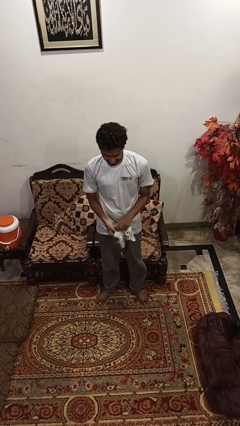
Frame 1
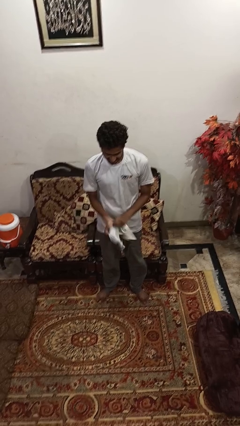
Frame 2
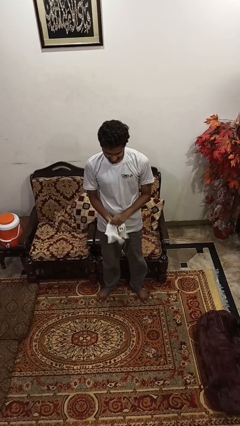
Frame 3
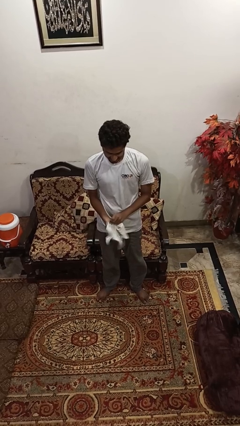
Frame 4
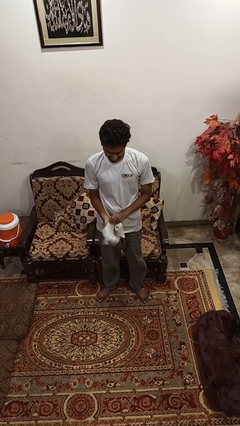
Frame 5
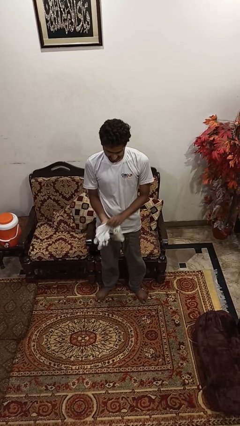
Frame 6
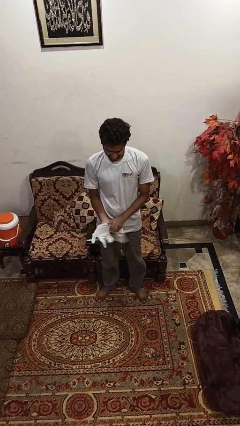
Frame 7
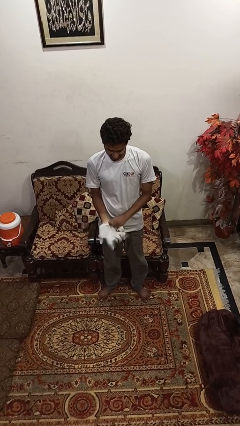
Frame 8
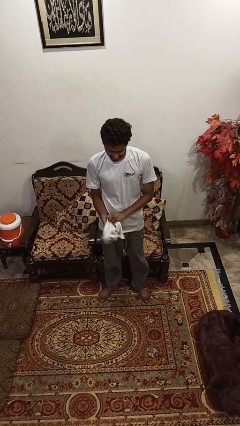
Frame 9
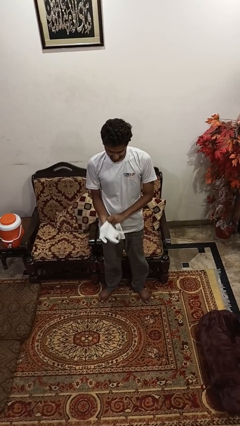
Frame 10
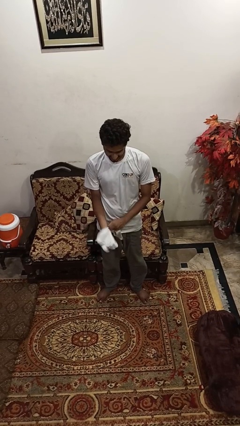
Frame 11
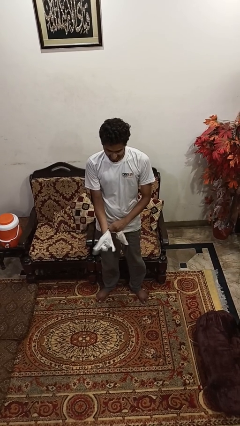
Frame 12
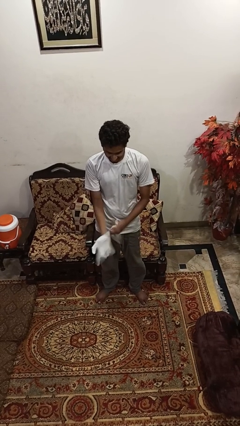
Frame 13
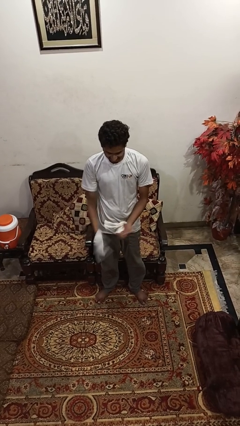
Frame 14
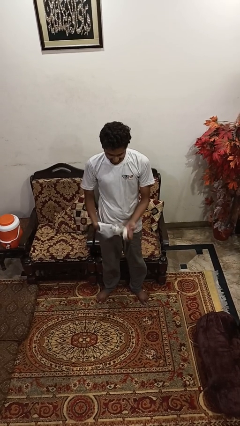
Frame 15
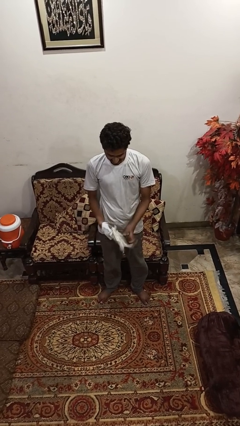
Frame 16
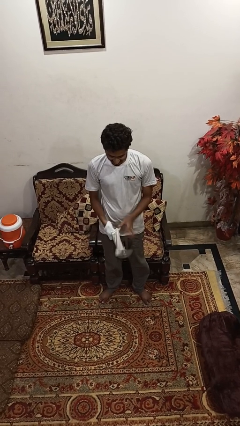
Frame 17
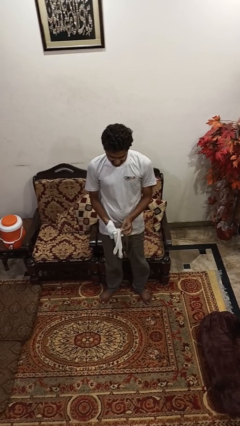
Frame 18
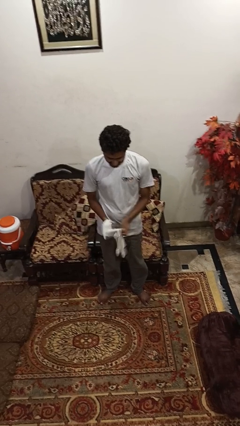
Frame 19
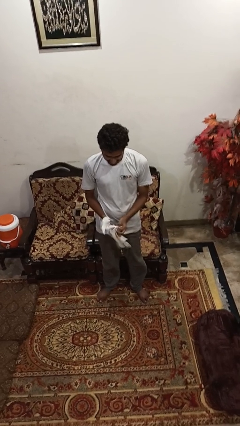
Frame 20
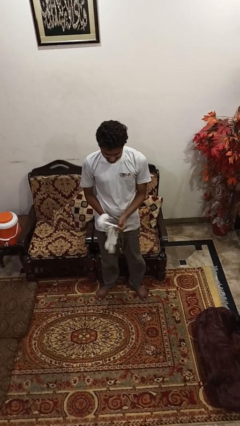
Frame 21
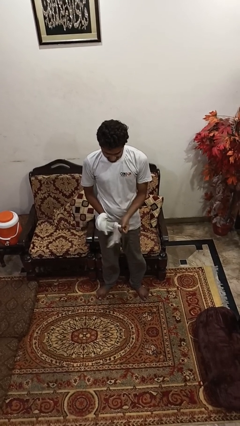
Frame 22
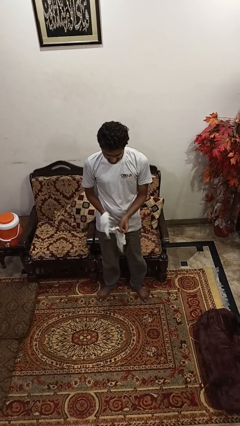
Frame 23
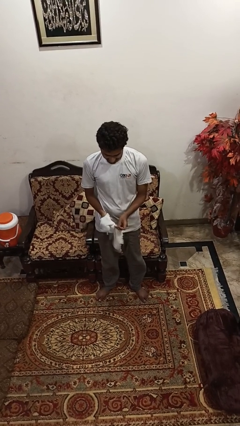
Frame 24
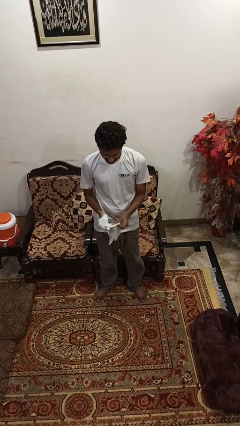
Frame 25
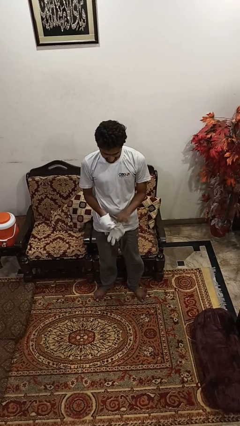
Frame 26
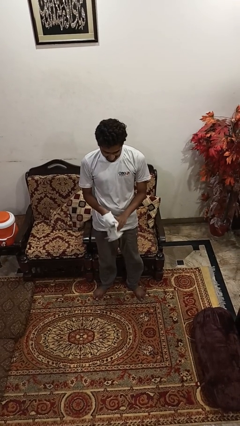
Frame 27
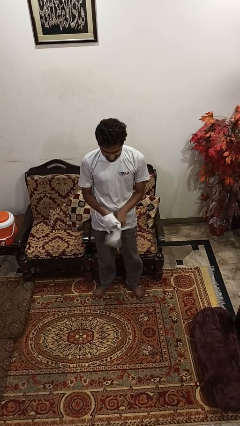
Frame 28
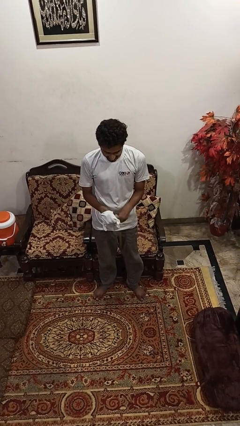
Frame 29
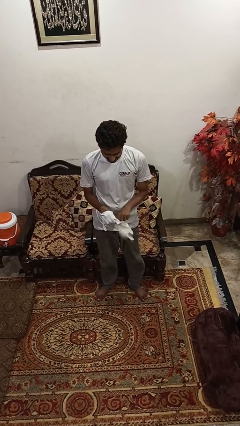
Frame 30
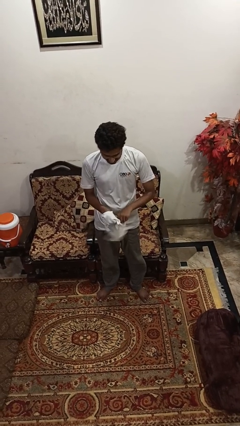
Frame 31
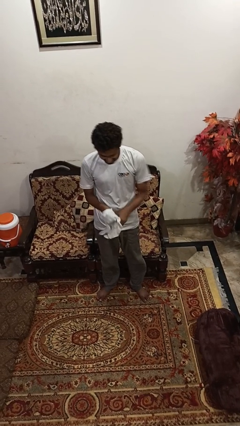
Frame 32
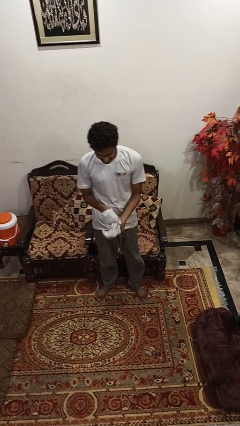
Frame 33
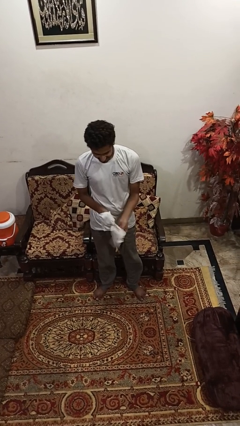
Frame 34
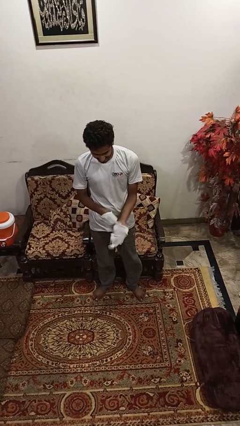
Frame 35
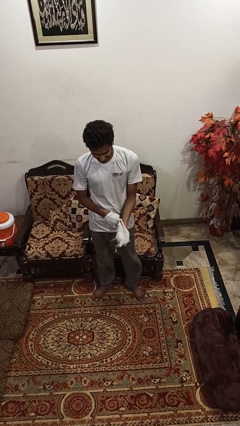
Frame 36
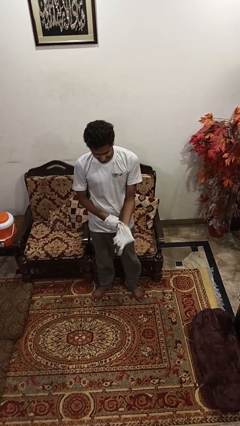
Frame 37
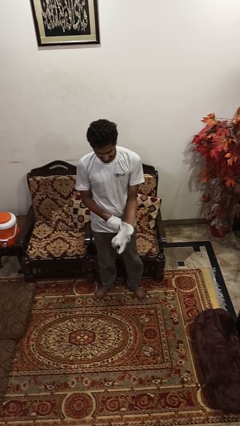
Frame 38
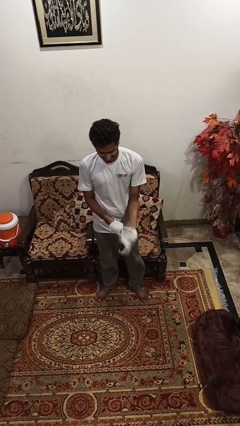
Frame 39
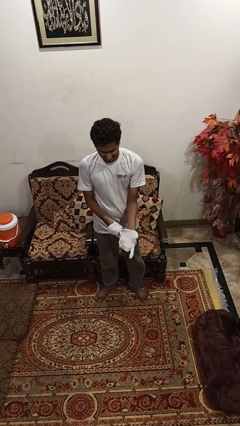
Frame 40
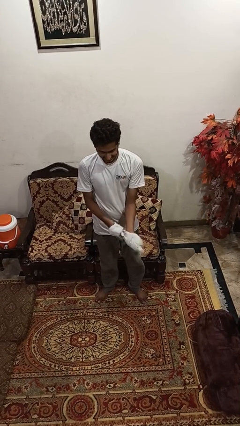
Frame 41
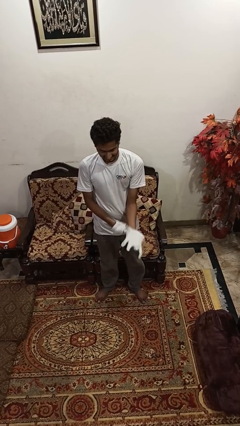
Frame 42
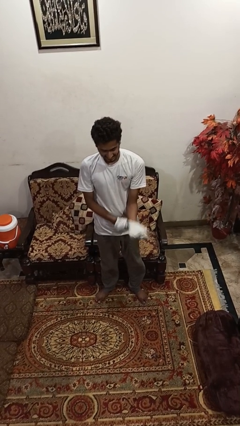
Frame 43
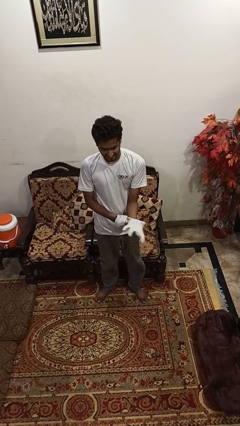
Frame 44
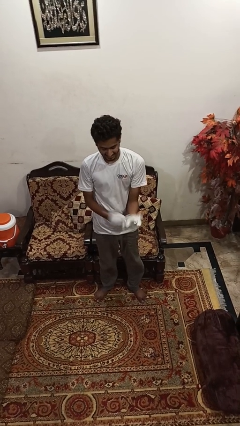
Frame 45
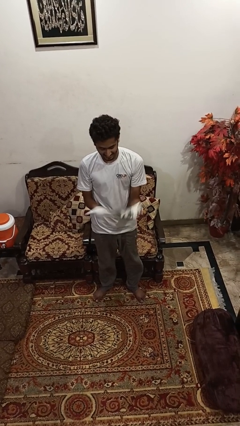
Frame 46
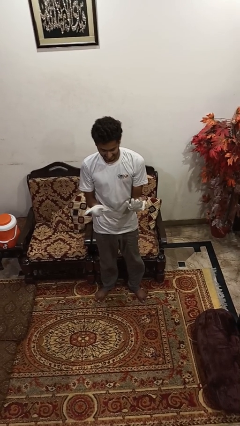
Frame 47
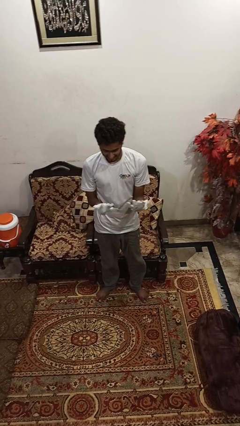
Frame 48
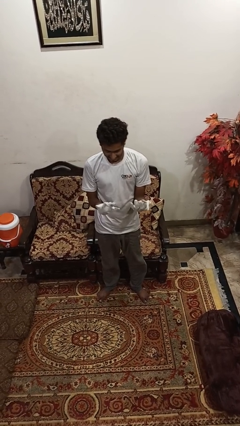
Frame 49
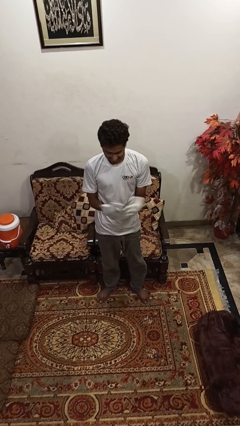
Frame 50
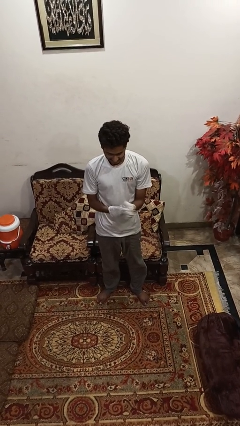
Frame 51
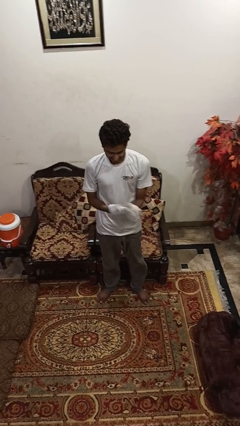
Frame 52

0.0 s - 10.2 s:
person puts on gloves

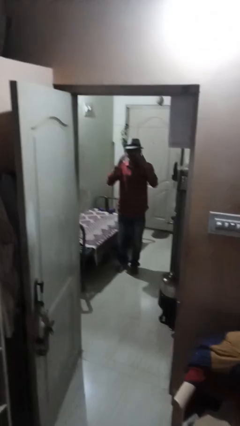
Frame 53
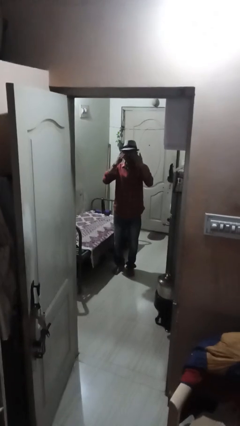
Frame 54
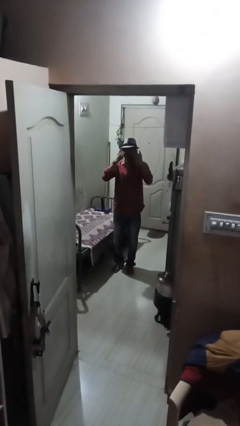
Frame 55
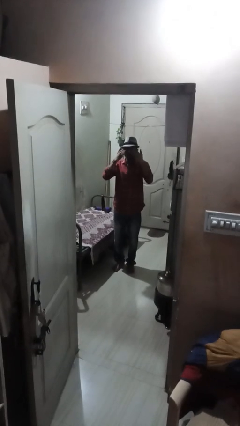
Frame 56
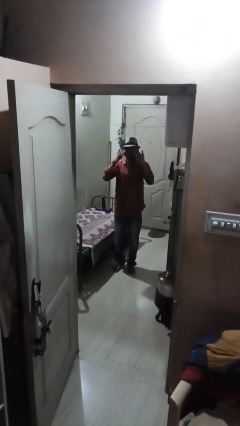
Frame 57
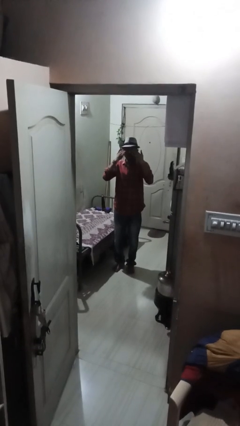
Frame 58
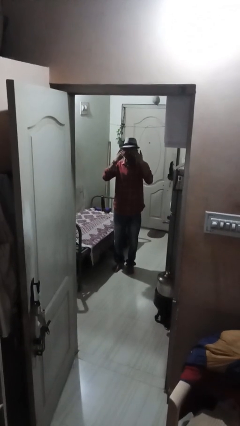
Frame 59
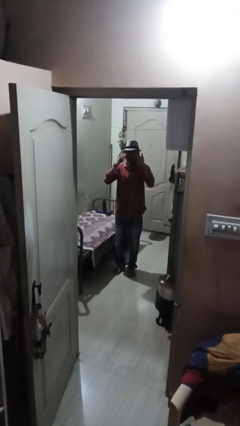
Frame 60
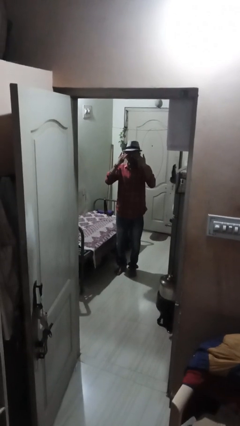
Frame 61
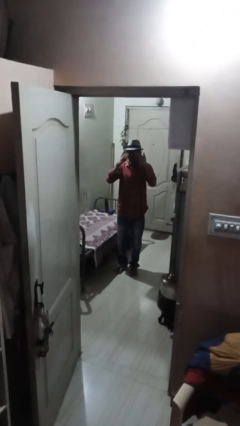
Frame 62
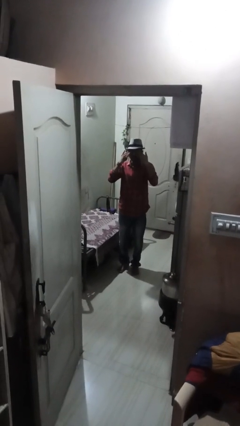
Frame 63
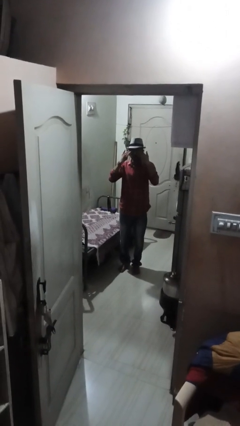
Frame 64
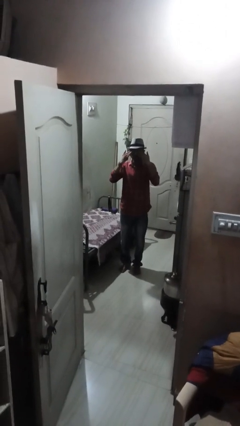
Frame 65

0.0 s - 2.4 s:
person rubs eyes

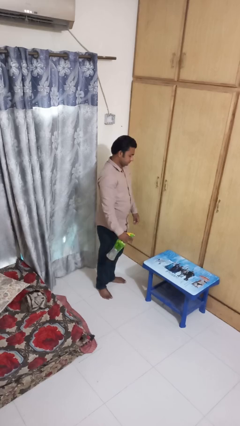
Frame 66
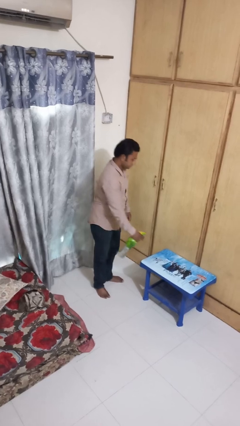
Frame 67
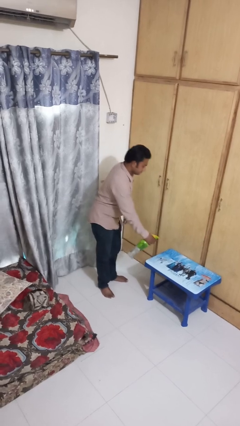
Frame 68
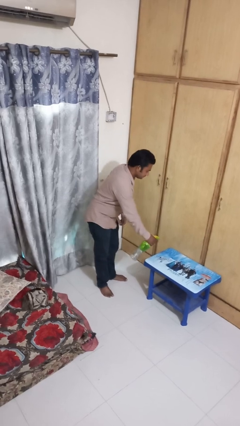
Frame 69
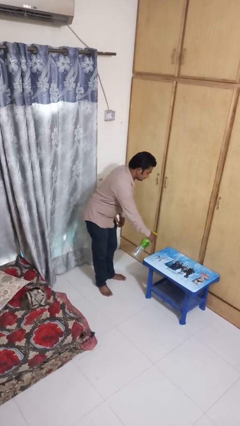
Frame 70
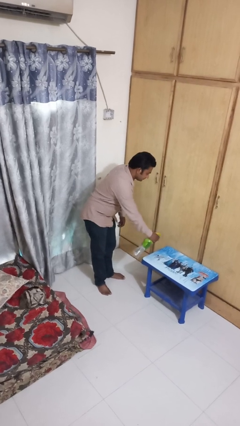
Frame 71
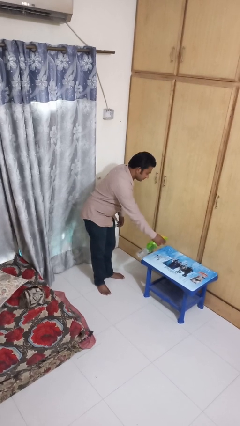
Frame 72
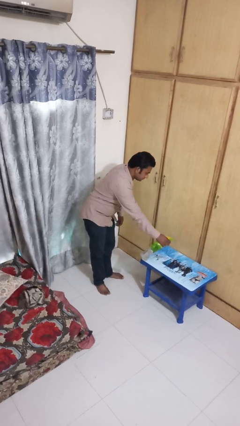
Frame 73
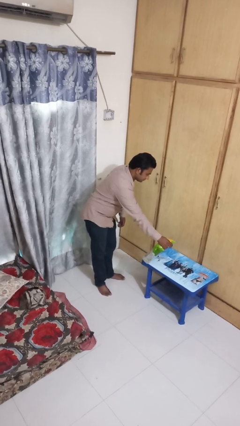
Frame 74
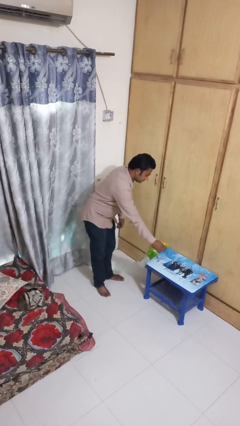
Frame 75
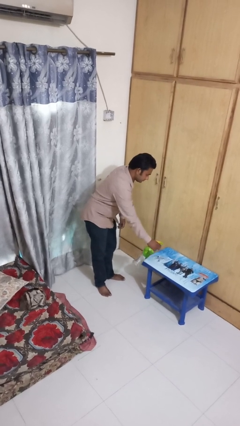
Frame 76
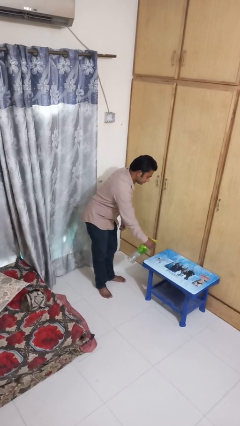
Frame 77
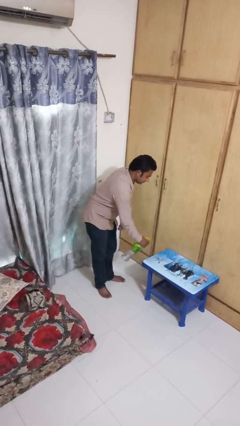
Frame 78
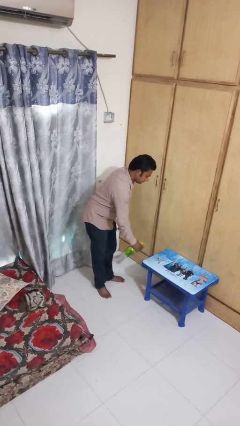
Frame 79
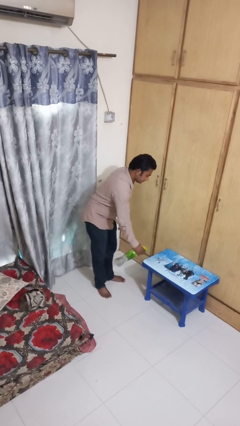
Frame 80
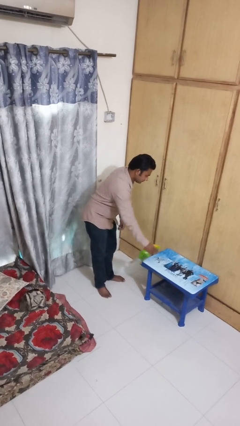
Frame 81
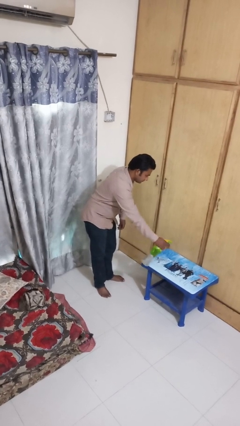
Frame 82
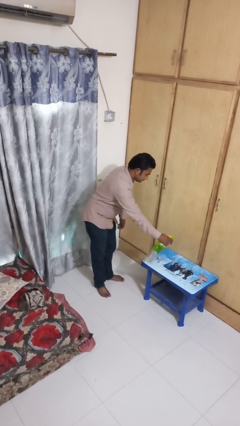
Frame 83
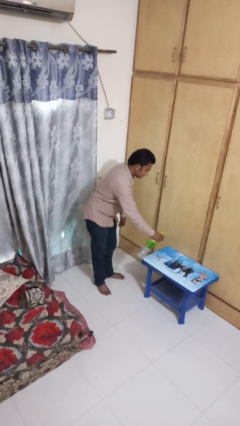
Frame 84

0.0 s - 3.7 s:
person sprays from bottle

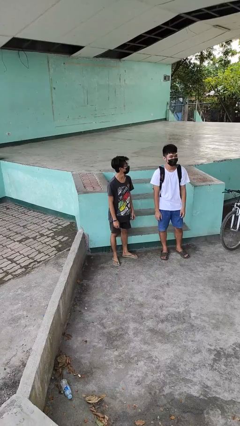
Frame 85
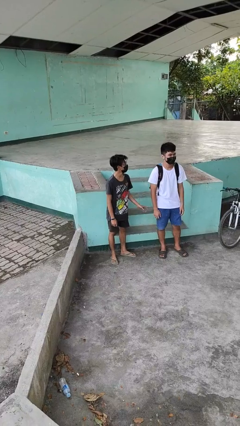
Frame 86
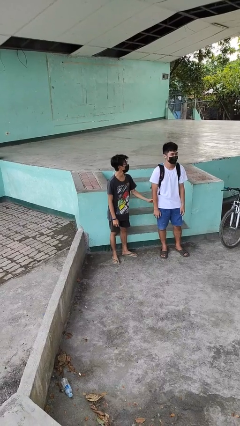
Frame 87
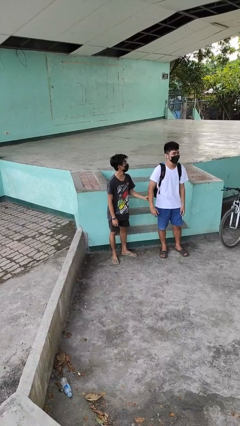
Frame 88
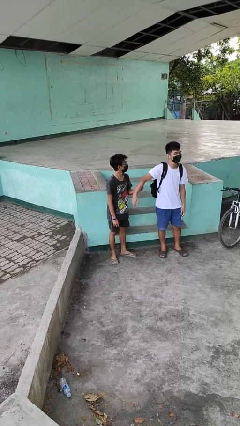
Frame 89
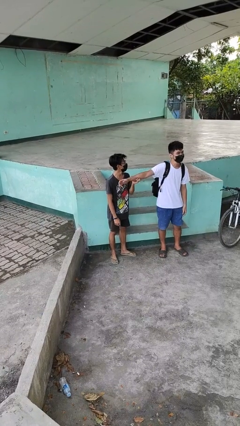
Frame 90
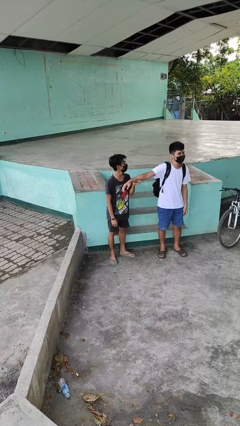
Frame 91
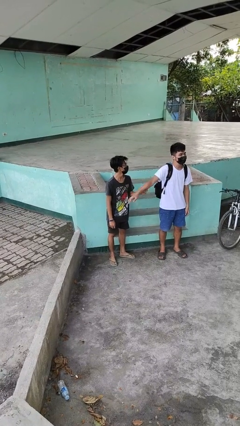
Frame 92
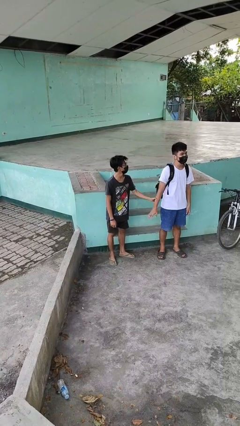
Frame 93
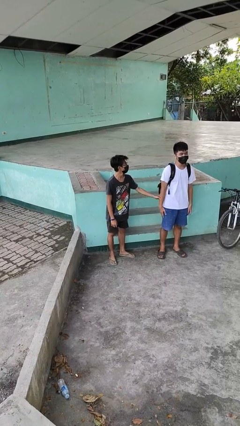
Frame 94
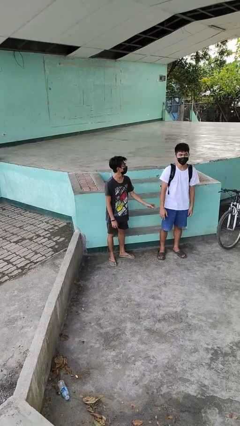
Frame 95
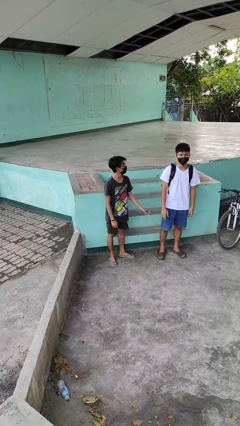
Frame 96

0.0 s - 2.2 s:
person grabs person by forearm
